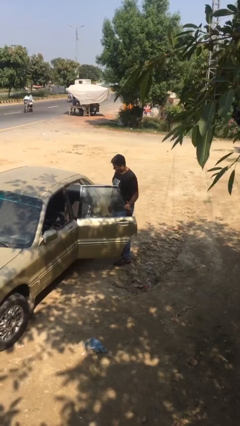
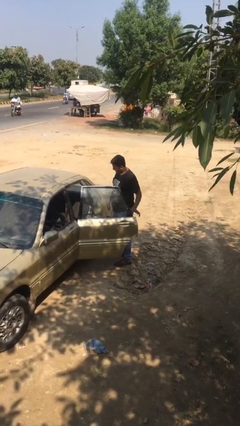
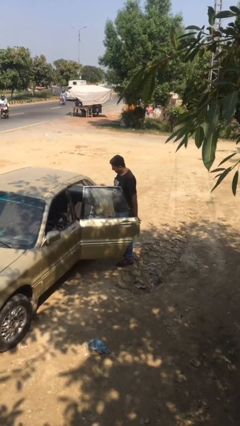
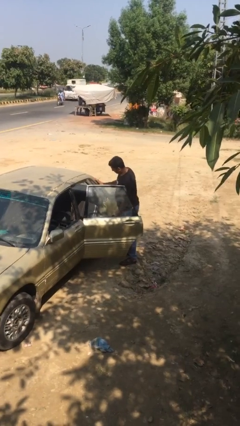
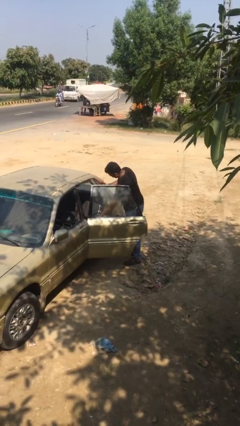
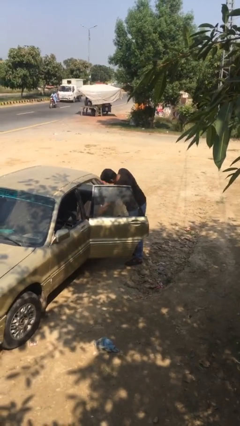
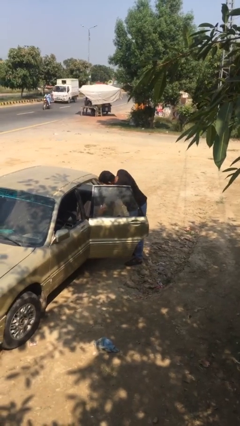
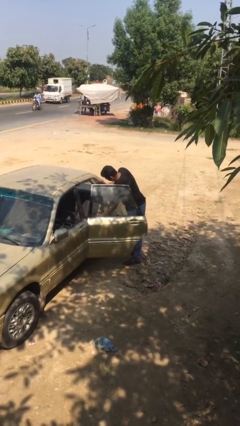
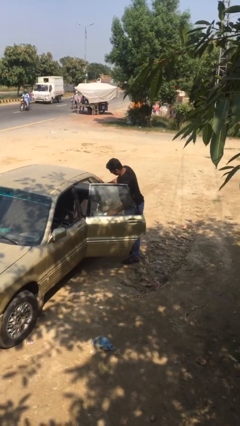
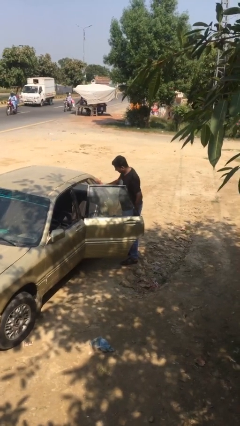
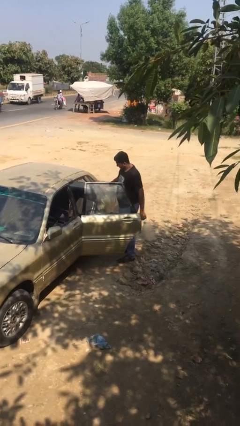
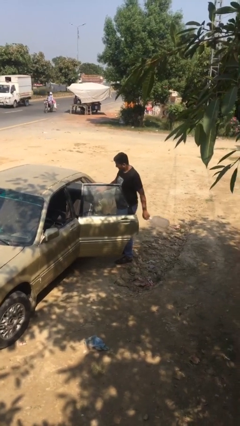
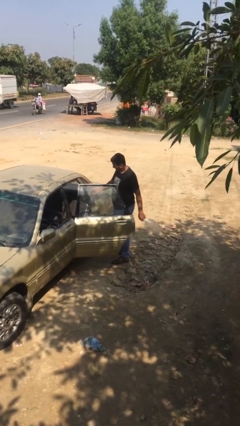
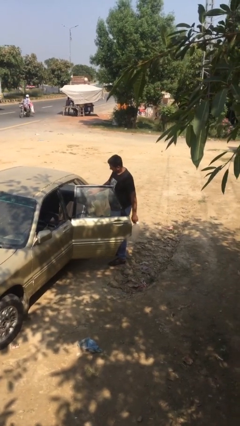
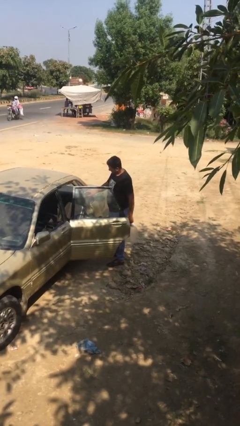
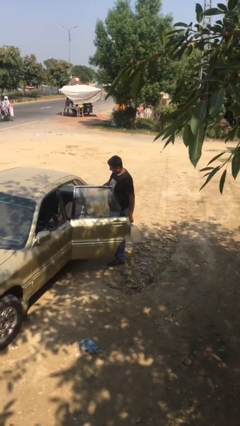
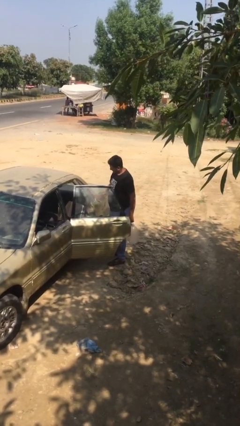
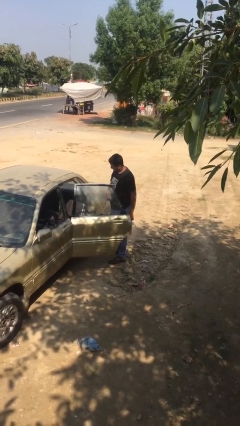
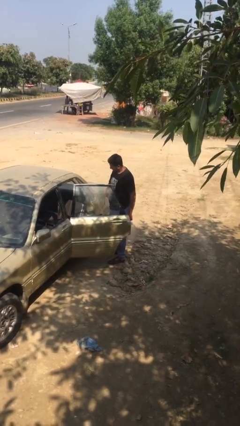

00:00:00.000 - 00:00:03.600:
person unloads car

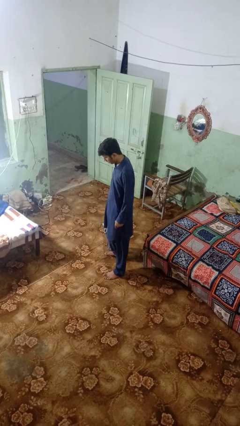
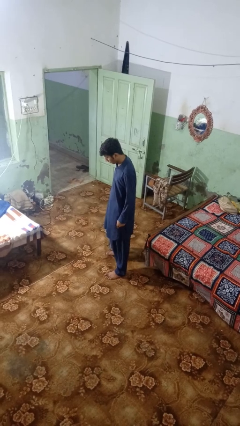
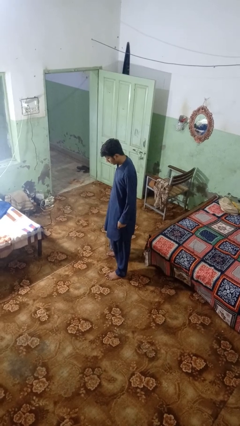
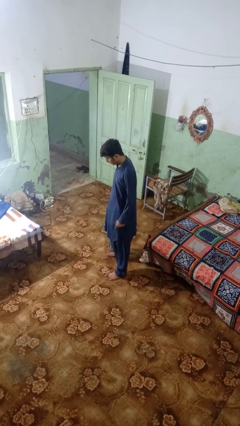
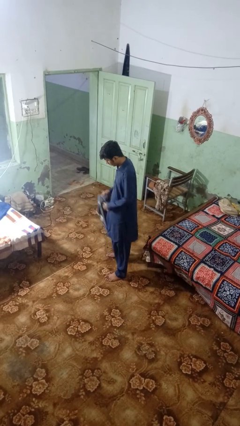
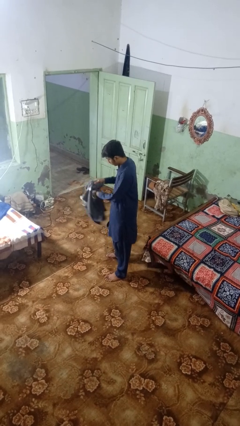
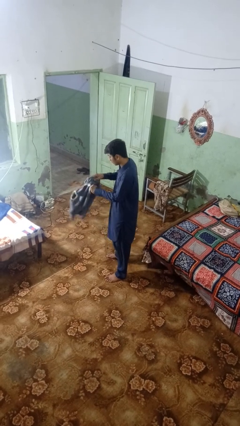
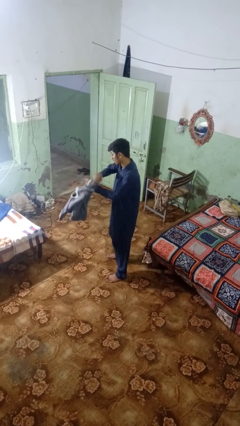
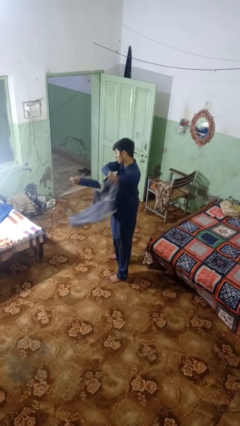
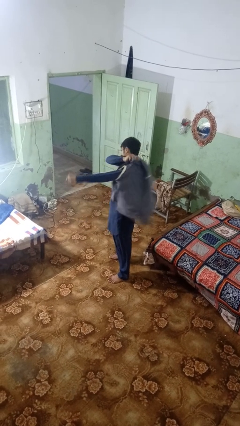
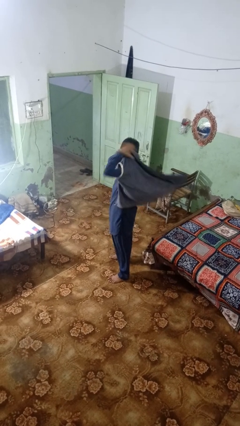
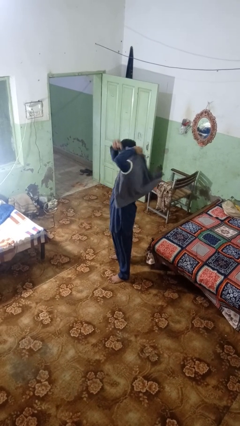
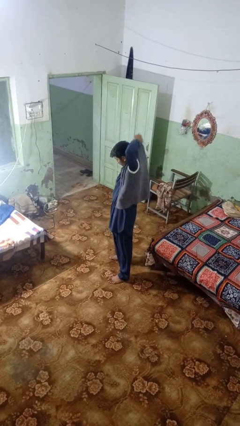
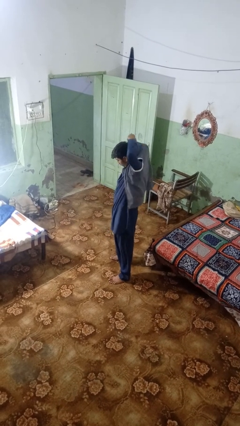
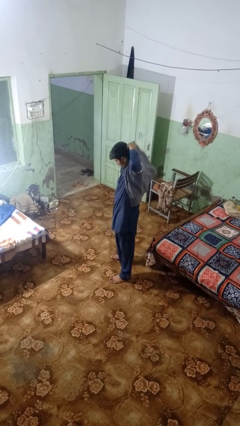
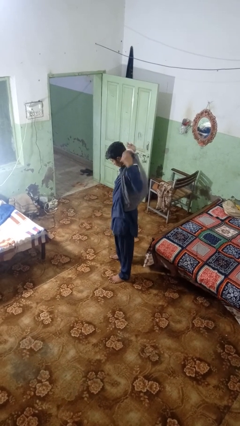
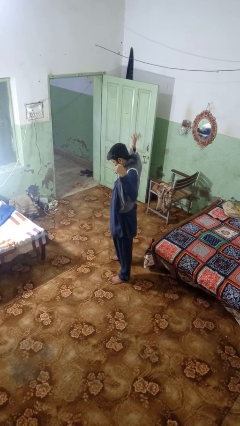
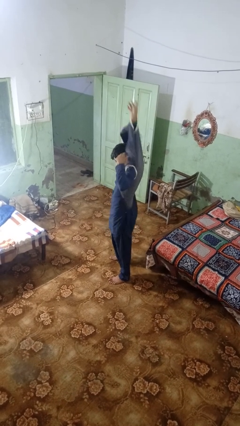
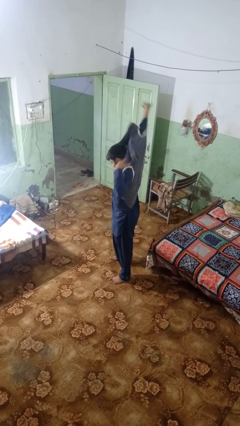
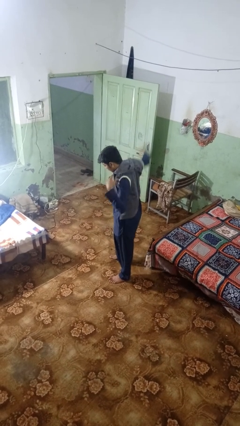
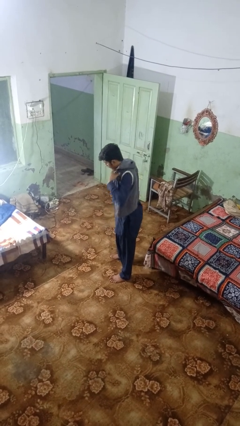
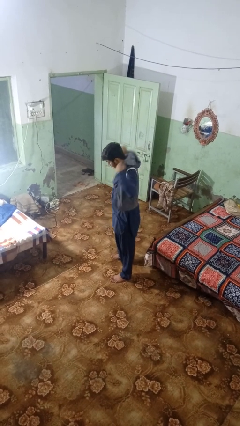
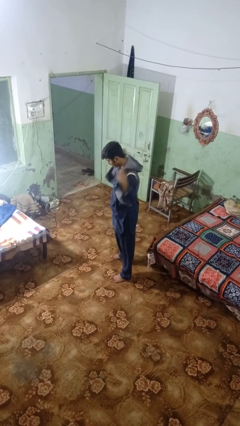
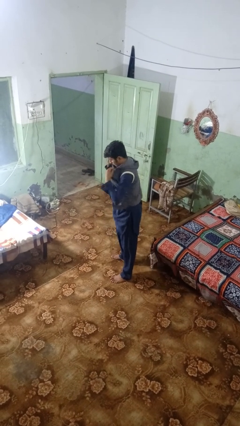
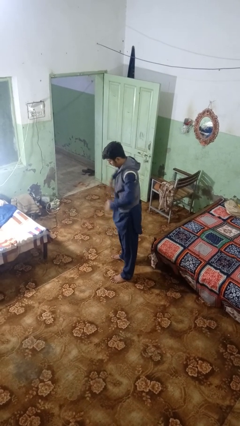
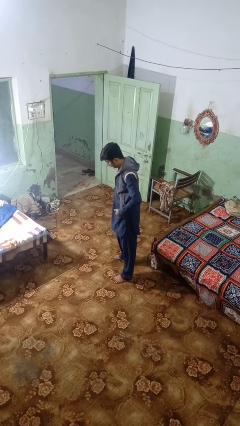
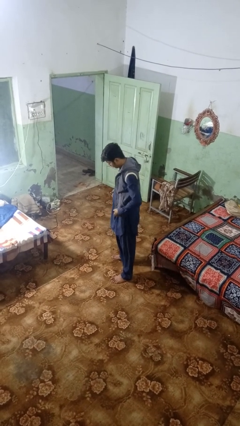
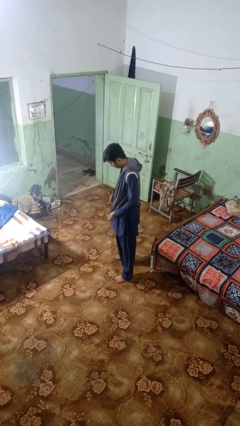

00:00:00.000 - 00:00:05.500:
person puts on jacket

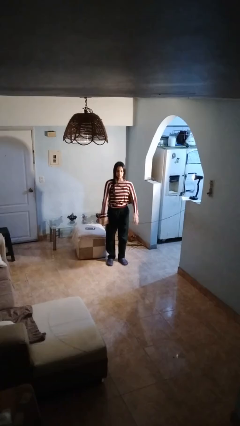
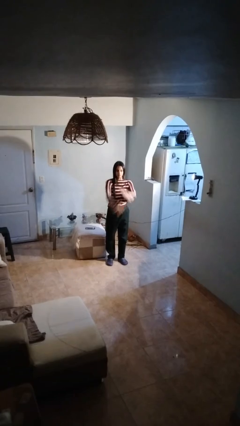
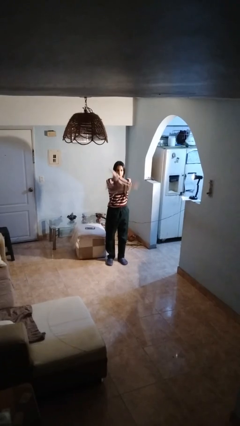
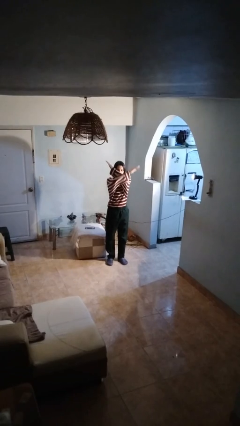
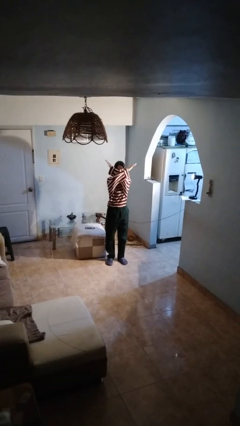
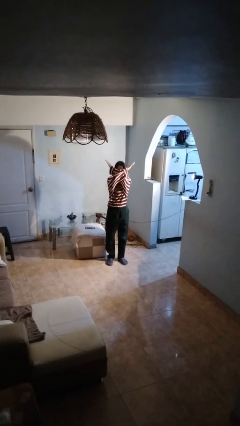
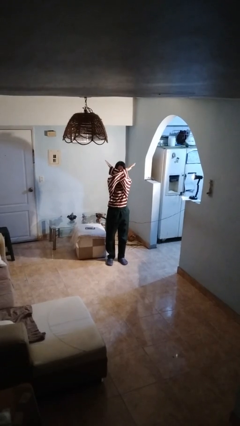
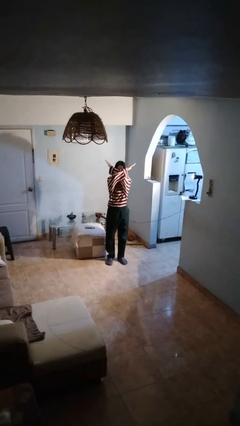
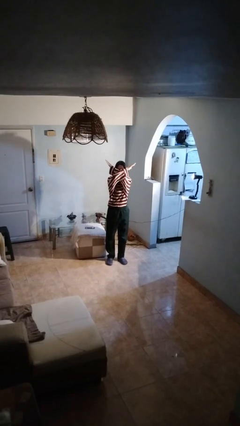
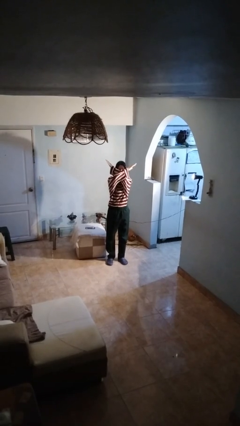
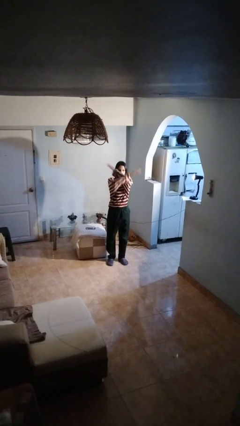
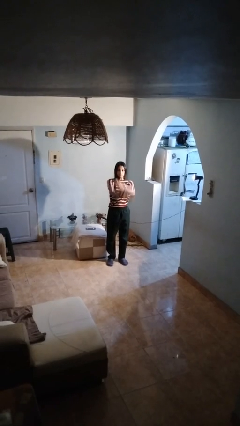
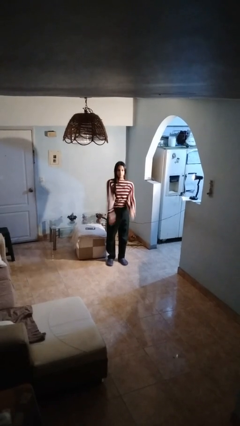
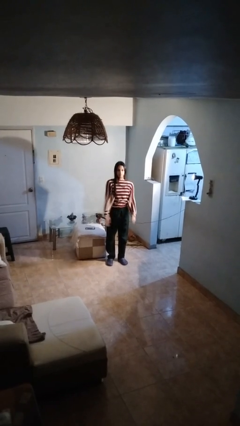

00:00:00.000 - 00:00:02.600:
person gestures arms x

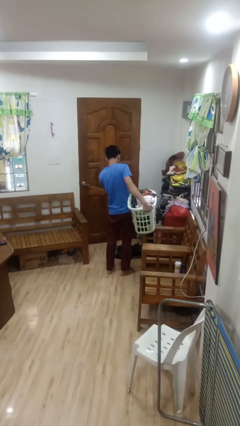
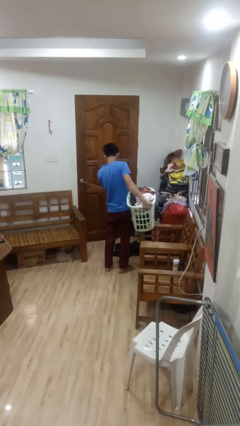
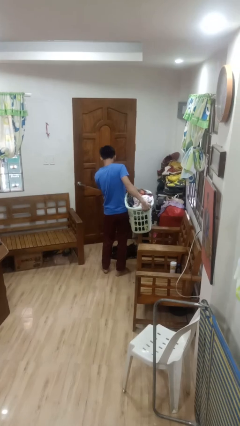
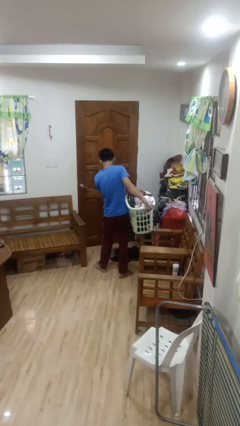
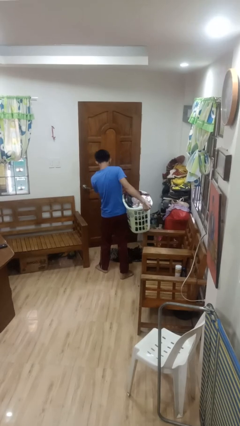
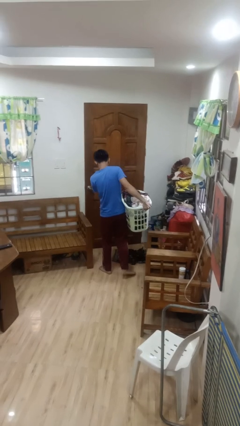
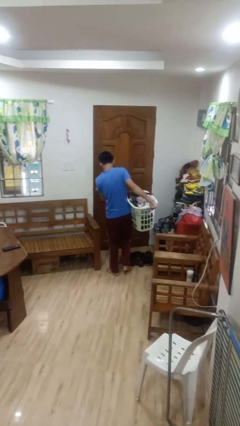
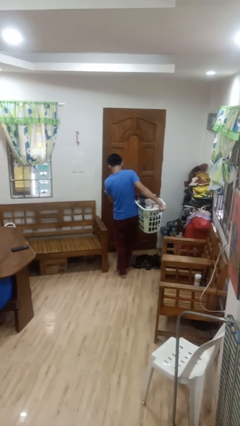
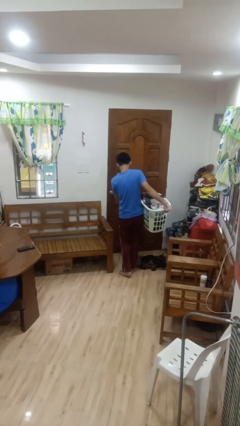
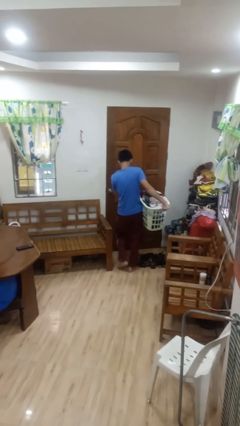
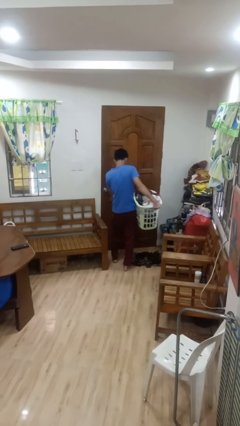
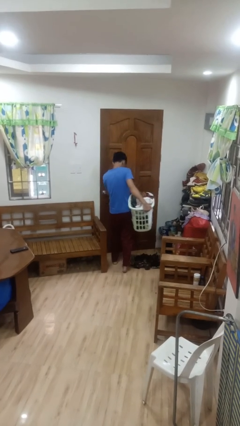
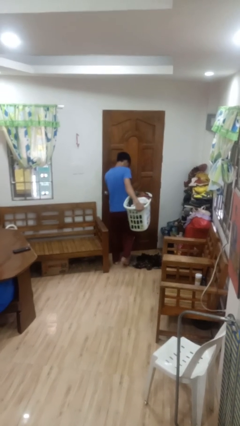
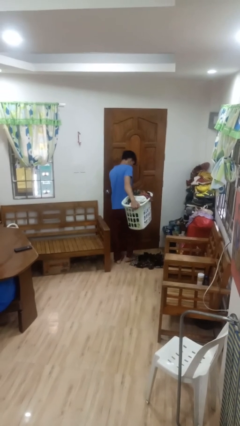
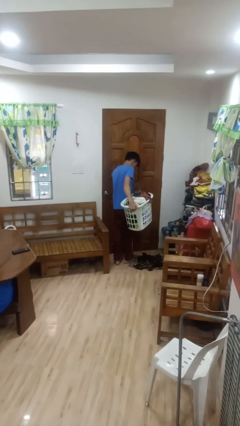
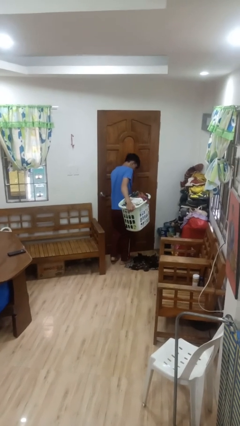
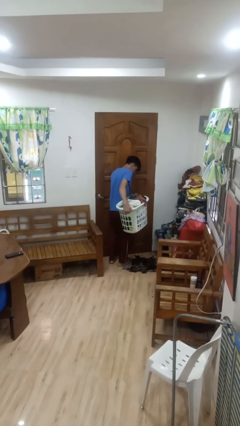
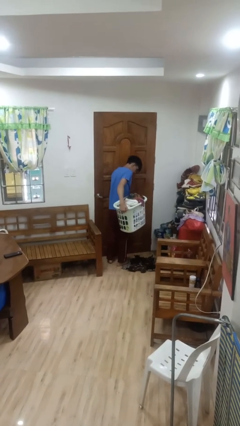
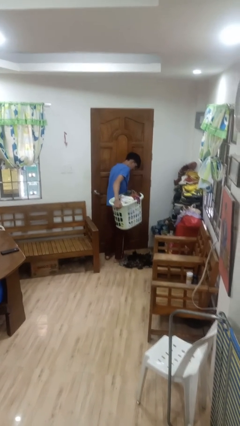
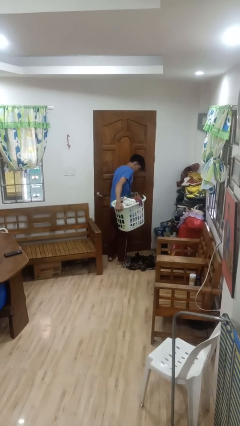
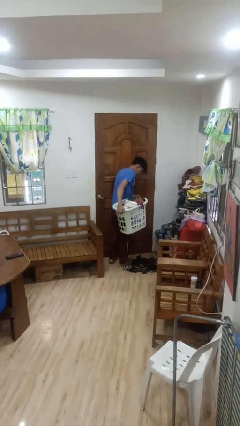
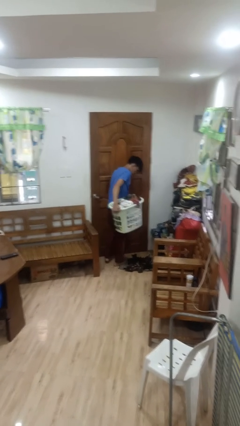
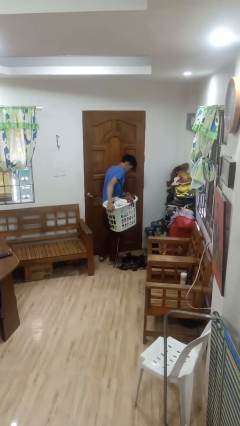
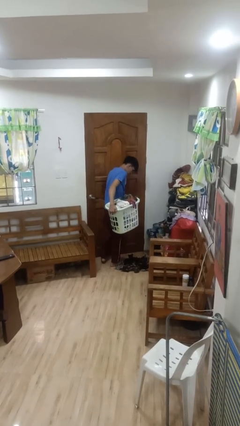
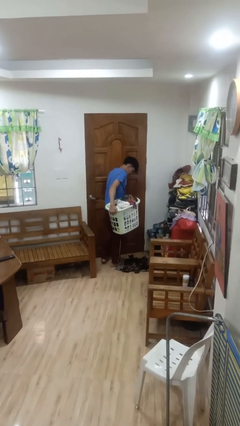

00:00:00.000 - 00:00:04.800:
person carries laundry basket

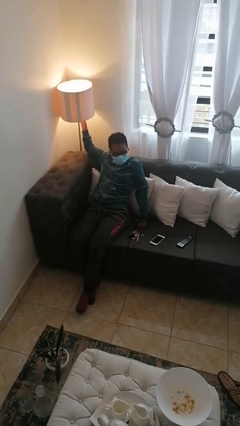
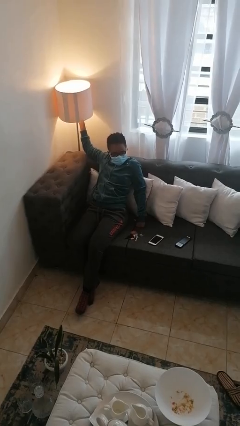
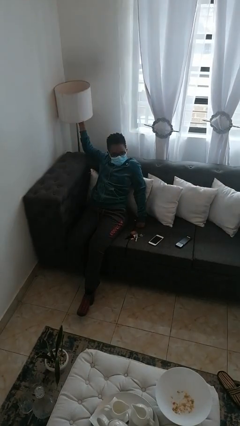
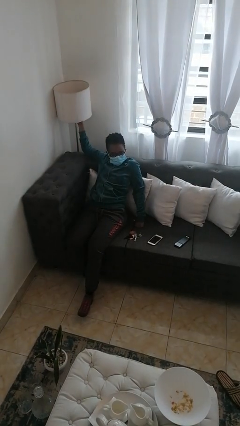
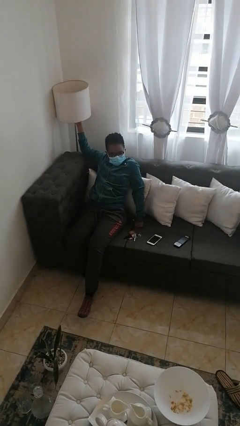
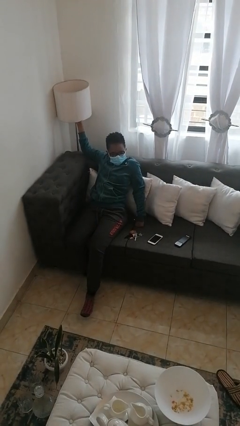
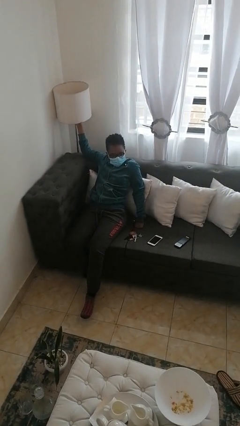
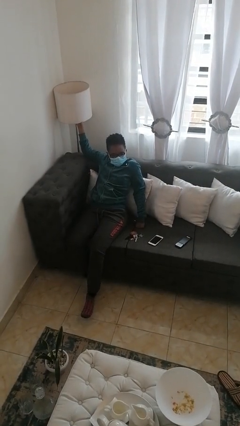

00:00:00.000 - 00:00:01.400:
person turns off lamp
